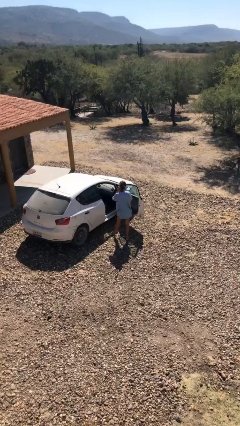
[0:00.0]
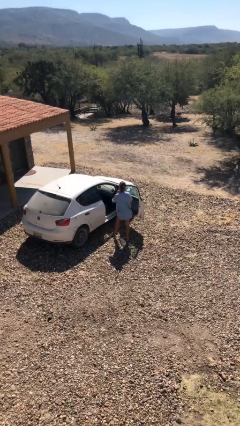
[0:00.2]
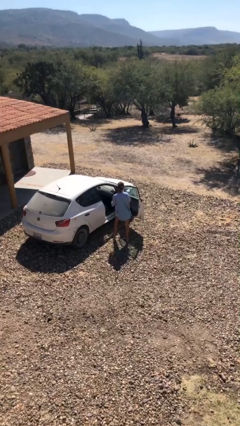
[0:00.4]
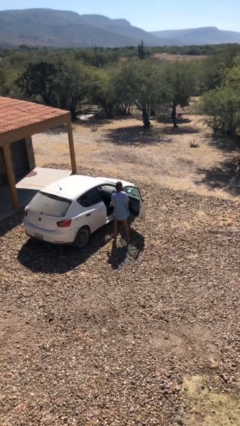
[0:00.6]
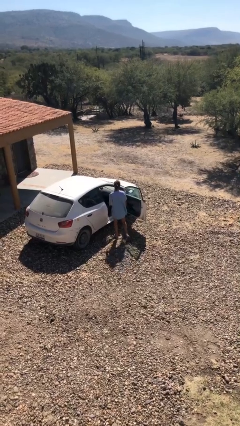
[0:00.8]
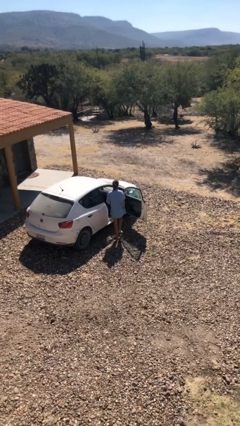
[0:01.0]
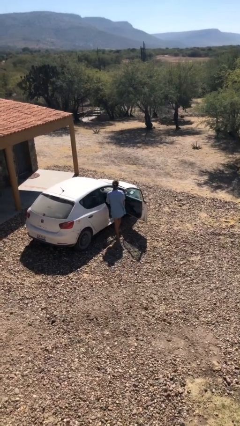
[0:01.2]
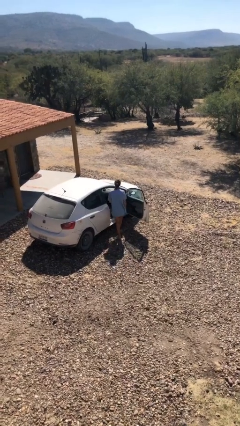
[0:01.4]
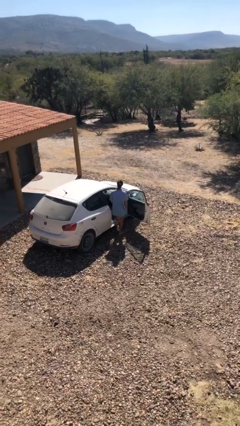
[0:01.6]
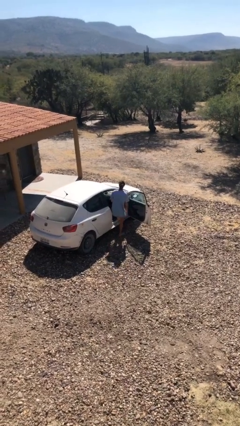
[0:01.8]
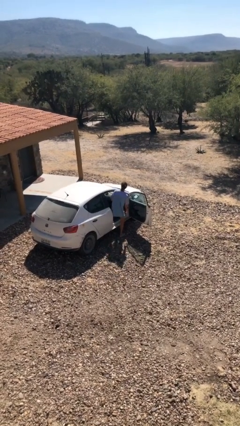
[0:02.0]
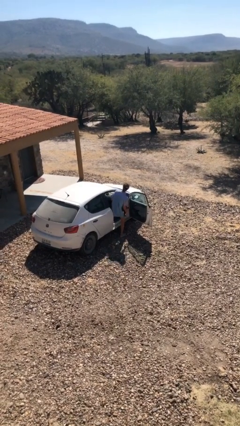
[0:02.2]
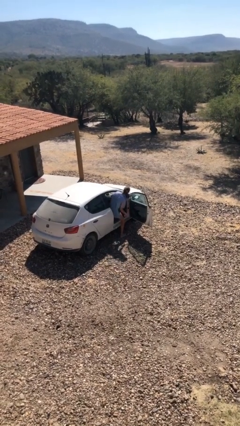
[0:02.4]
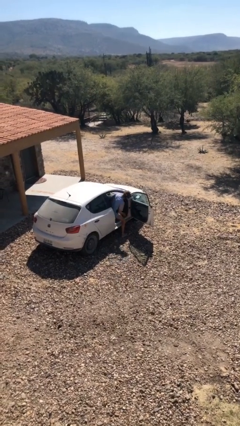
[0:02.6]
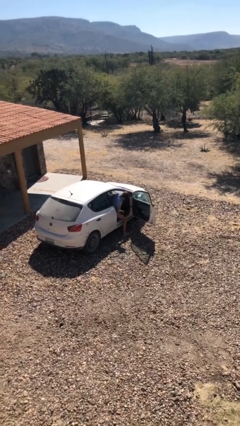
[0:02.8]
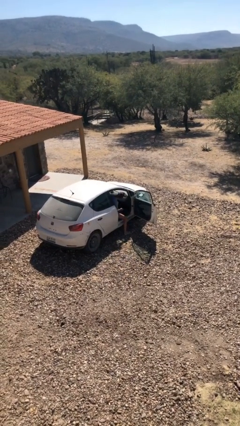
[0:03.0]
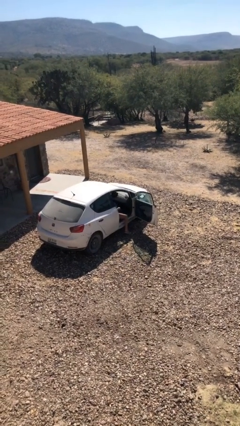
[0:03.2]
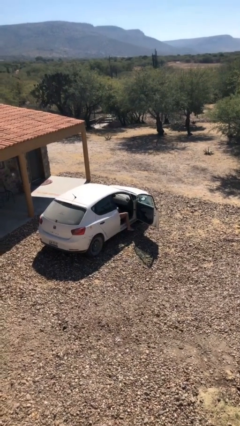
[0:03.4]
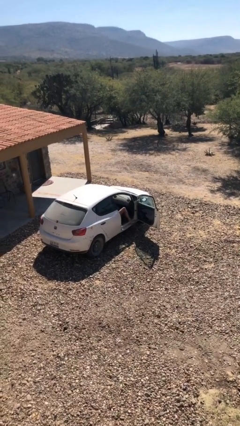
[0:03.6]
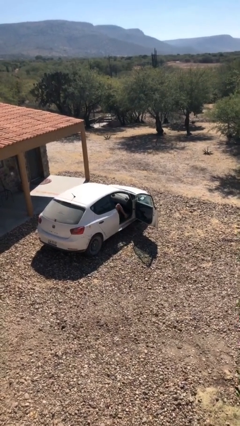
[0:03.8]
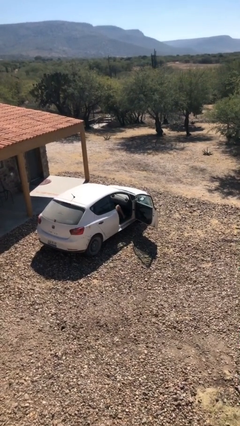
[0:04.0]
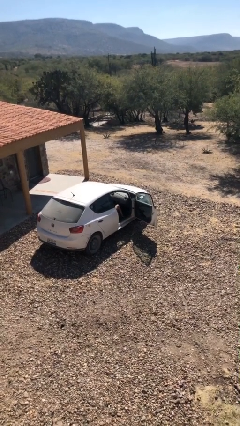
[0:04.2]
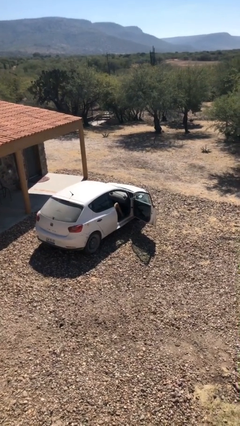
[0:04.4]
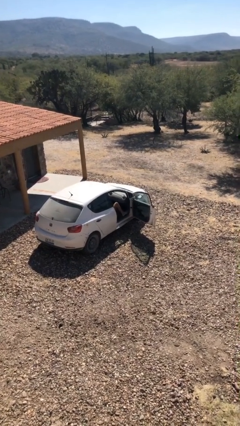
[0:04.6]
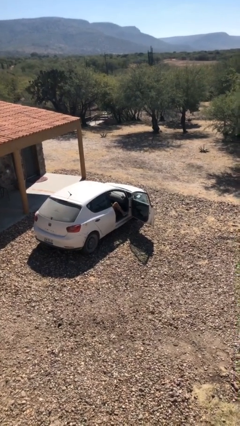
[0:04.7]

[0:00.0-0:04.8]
person enters car

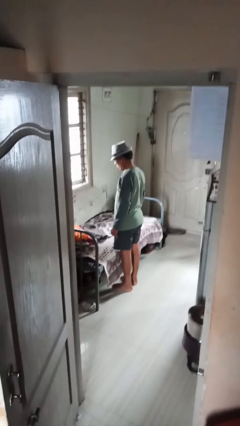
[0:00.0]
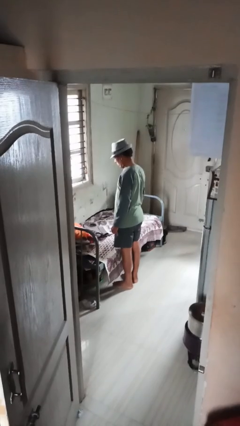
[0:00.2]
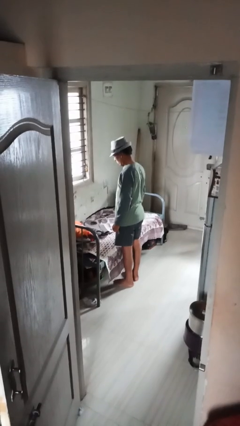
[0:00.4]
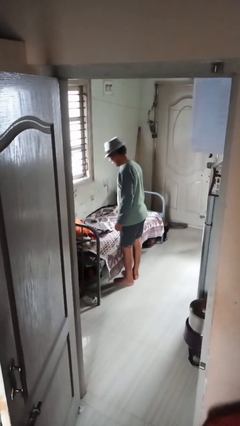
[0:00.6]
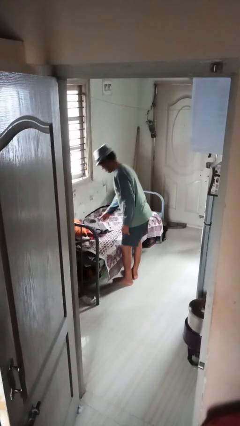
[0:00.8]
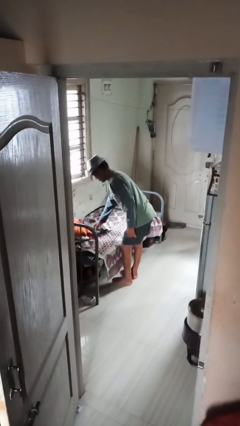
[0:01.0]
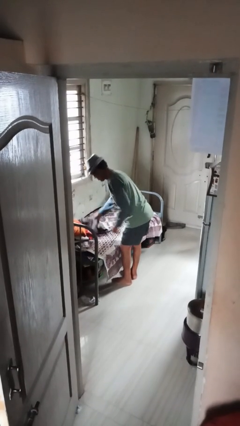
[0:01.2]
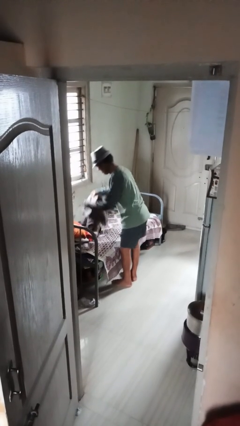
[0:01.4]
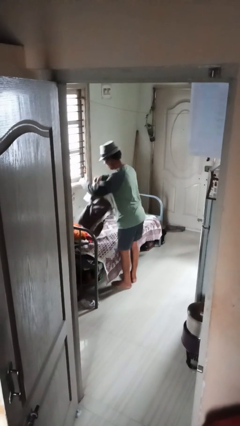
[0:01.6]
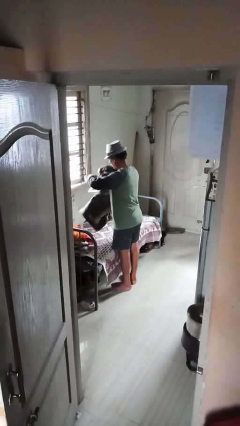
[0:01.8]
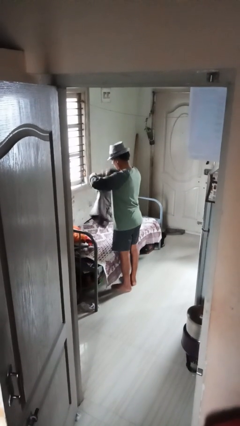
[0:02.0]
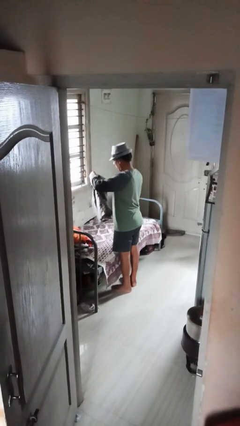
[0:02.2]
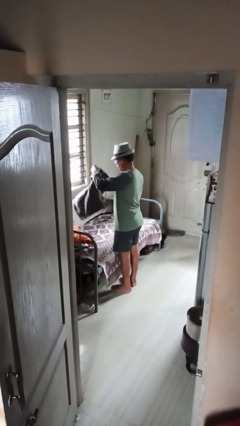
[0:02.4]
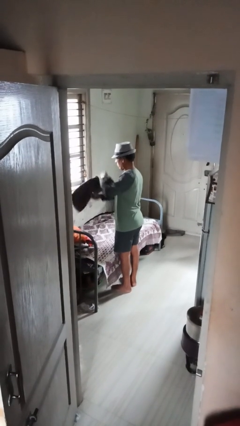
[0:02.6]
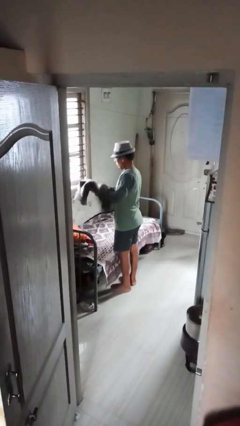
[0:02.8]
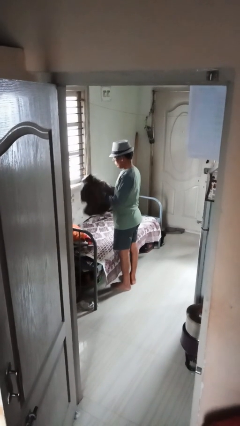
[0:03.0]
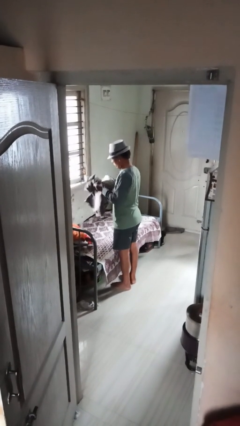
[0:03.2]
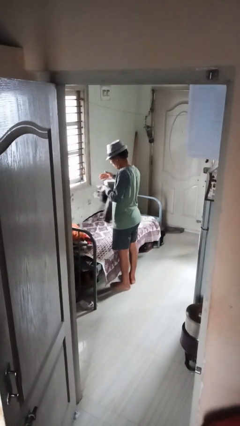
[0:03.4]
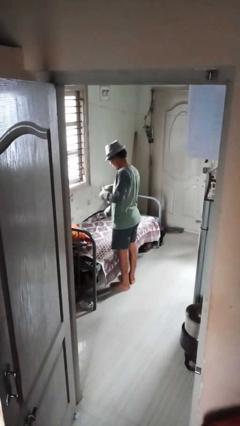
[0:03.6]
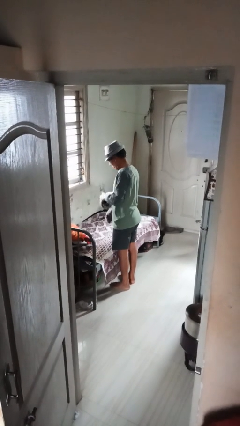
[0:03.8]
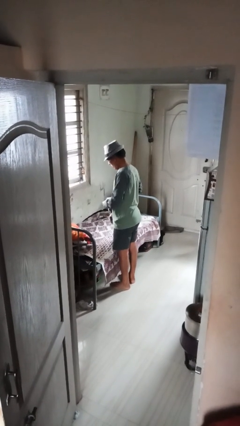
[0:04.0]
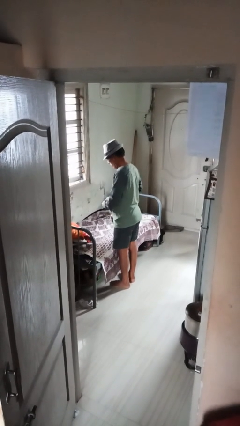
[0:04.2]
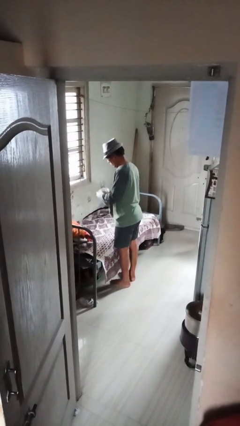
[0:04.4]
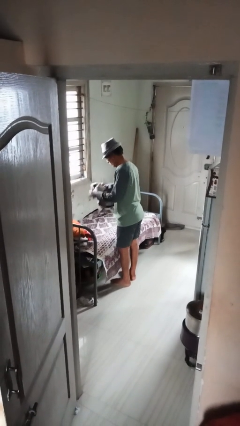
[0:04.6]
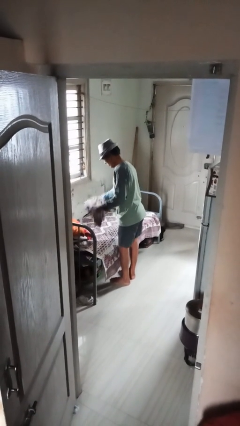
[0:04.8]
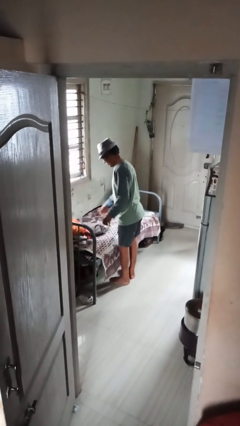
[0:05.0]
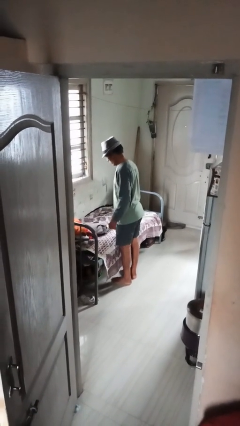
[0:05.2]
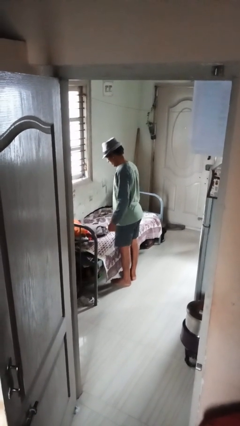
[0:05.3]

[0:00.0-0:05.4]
person folds pants

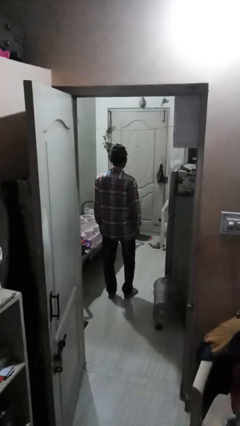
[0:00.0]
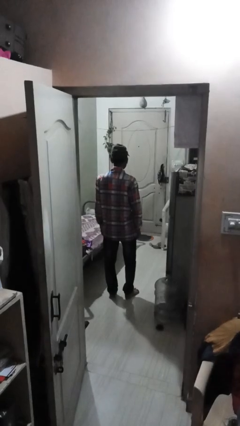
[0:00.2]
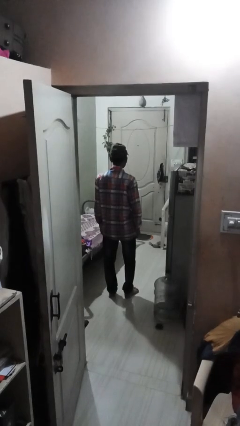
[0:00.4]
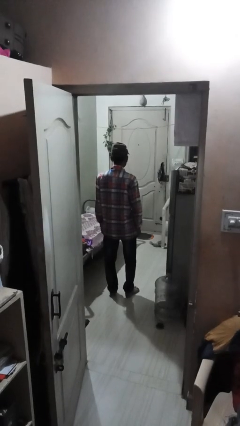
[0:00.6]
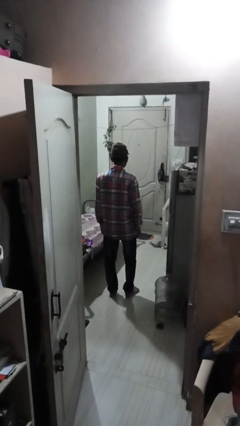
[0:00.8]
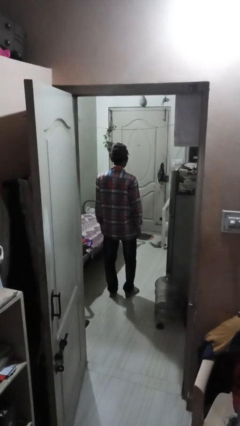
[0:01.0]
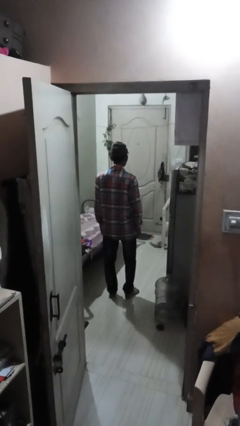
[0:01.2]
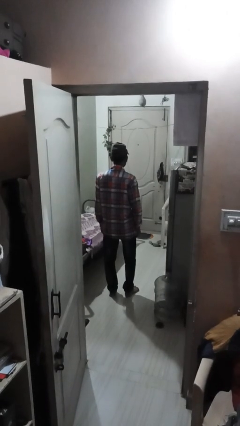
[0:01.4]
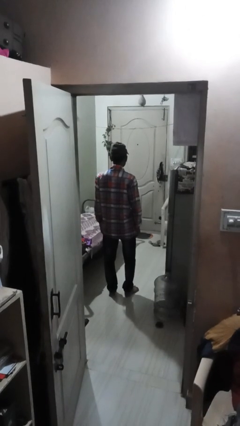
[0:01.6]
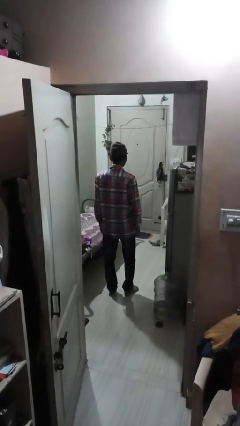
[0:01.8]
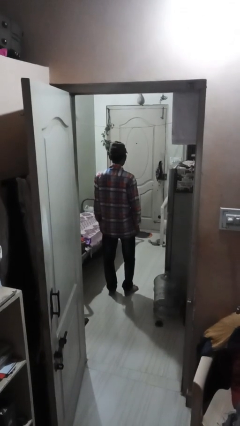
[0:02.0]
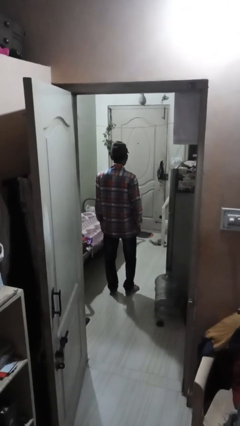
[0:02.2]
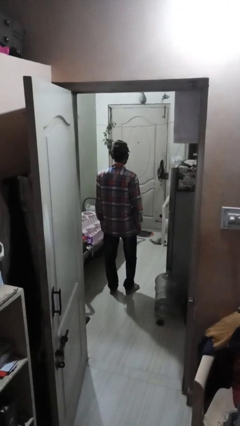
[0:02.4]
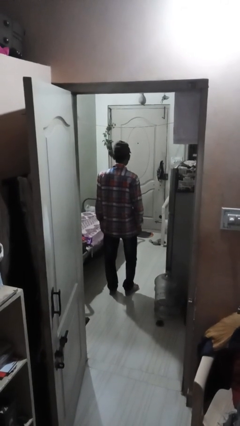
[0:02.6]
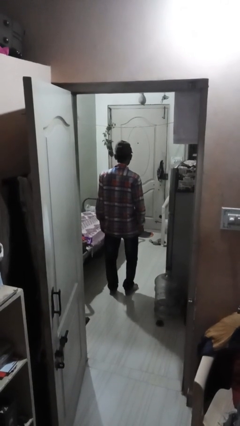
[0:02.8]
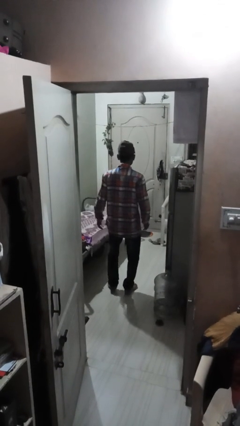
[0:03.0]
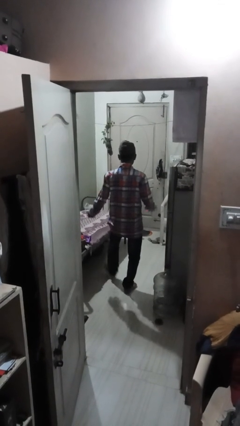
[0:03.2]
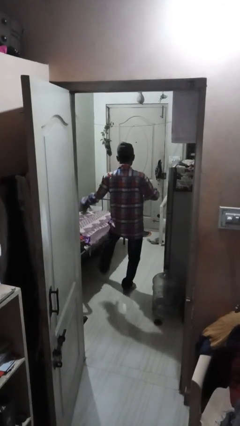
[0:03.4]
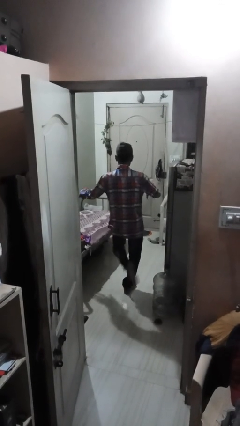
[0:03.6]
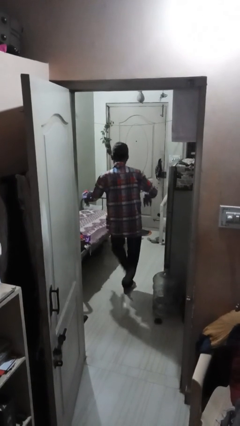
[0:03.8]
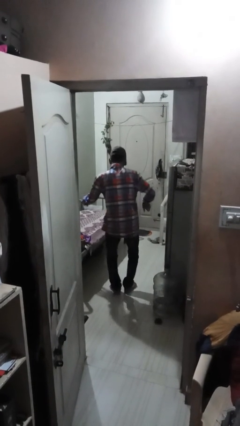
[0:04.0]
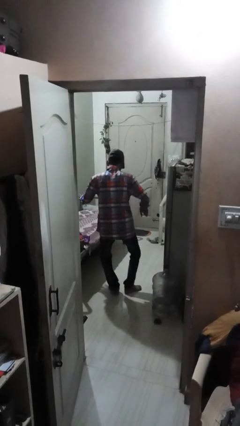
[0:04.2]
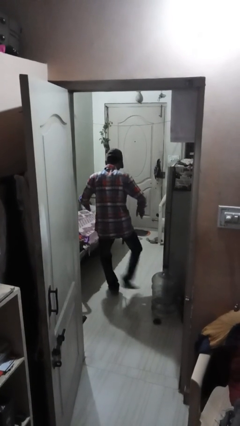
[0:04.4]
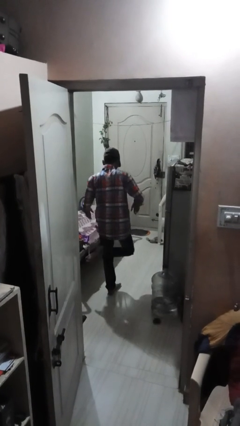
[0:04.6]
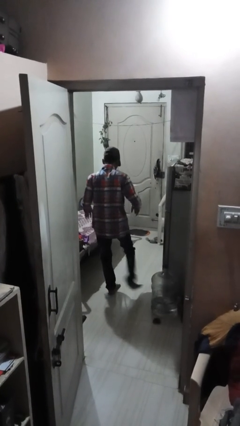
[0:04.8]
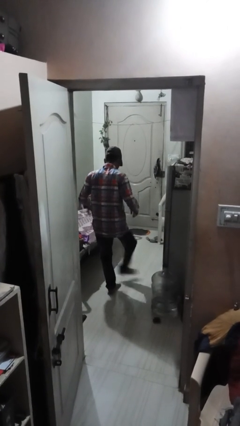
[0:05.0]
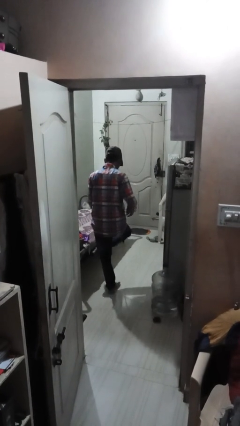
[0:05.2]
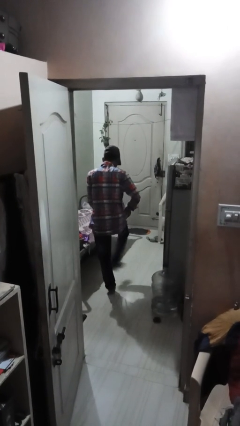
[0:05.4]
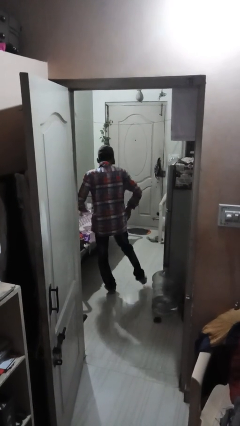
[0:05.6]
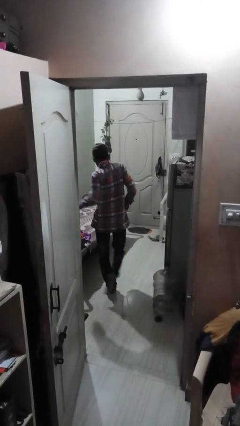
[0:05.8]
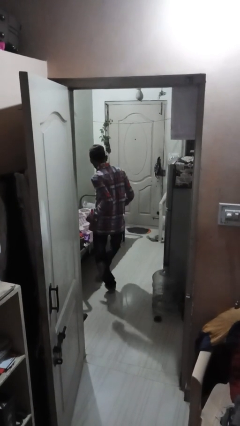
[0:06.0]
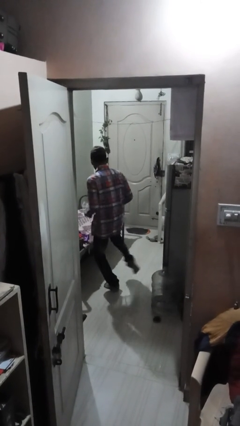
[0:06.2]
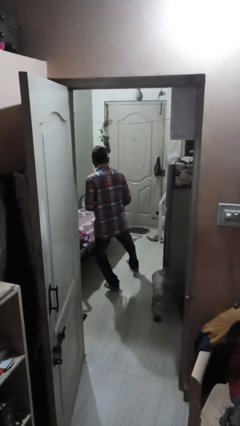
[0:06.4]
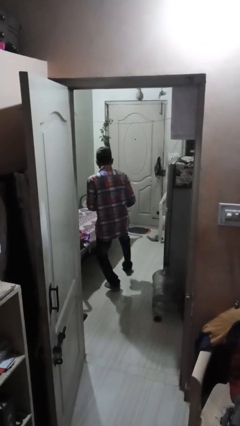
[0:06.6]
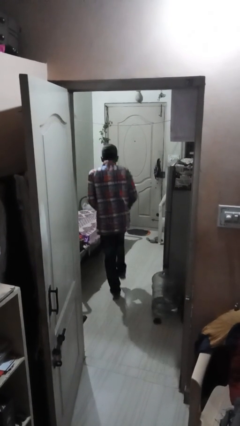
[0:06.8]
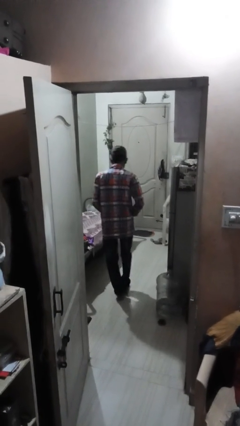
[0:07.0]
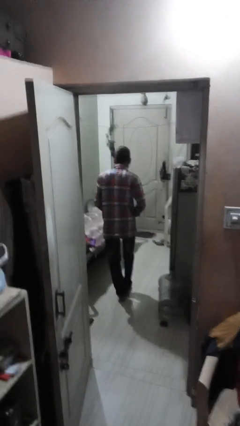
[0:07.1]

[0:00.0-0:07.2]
person dances in place

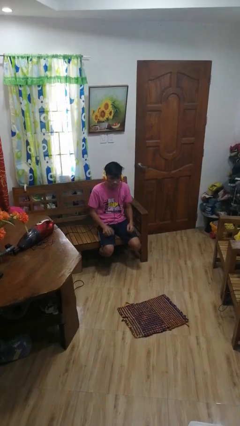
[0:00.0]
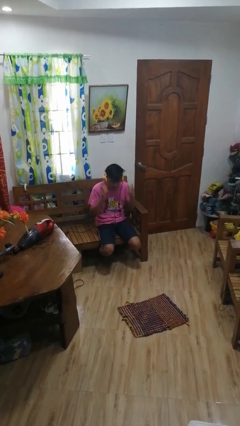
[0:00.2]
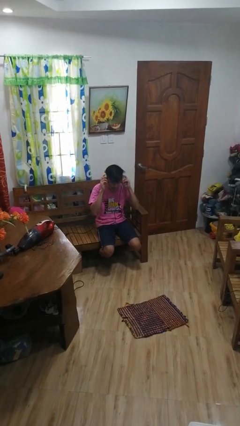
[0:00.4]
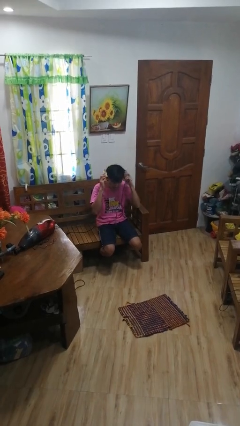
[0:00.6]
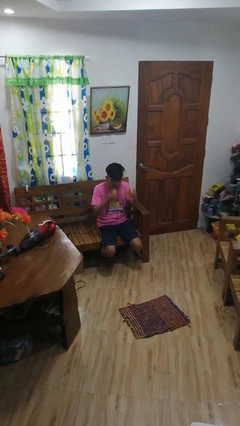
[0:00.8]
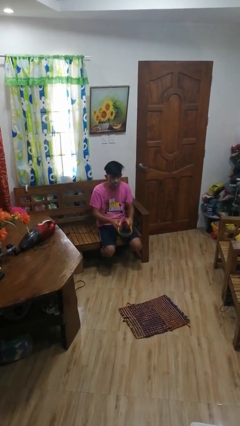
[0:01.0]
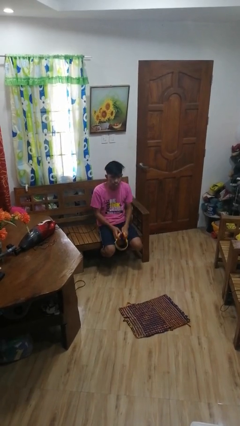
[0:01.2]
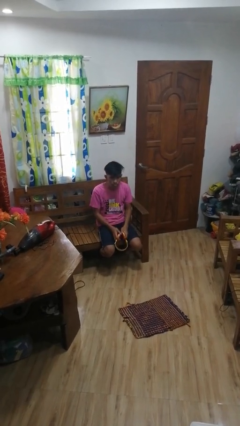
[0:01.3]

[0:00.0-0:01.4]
person takes off headphones
